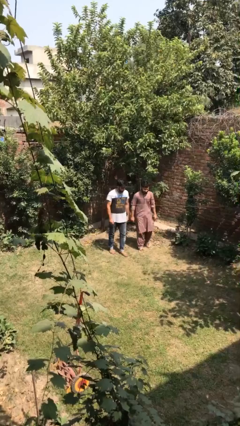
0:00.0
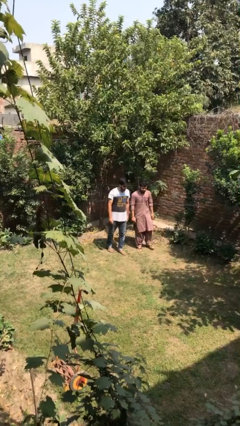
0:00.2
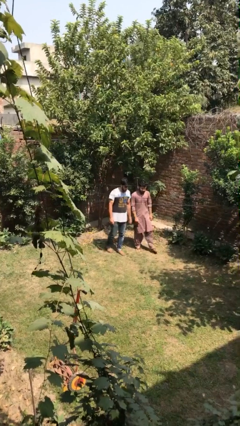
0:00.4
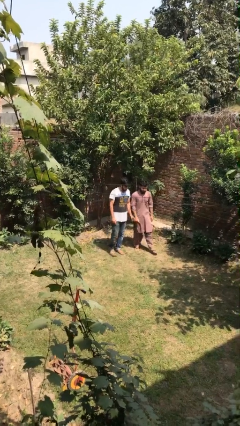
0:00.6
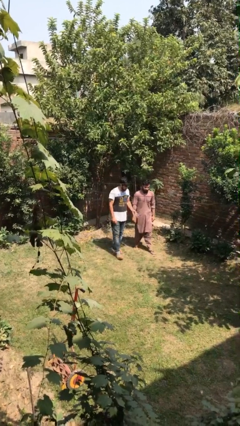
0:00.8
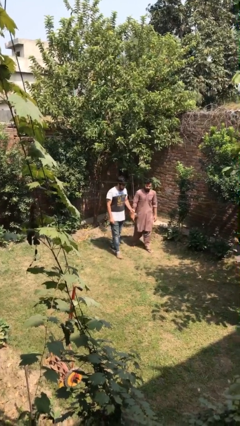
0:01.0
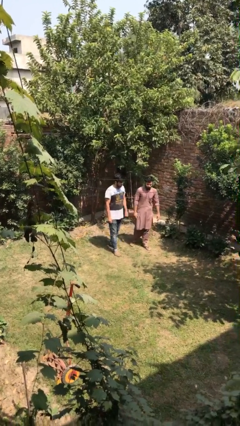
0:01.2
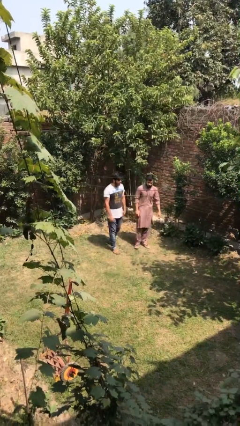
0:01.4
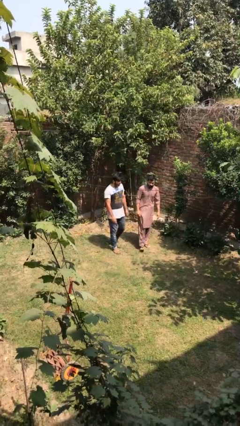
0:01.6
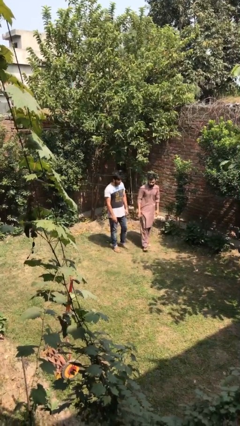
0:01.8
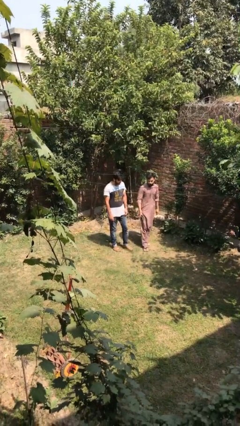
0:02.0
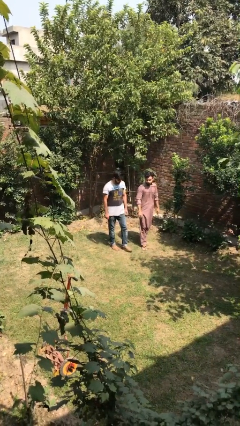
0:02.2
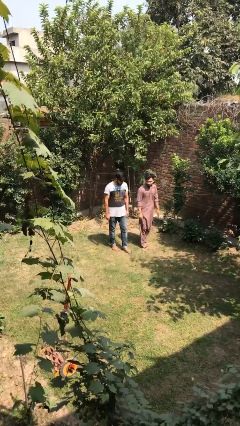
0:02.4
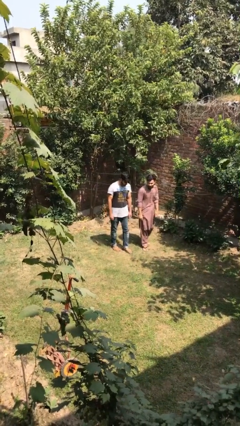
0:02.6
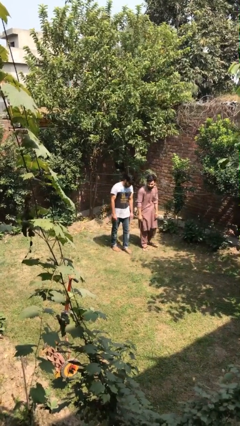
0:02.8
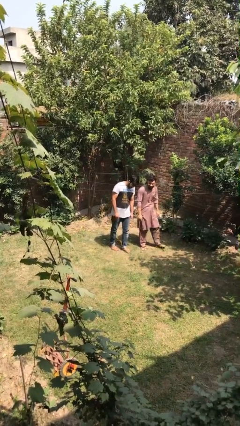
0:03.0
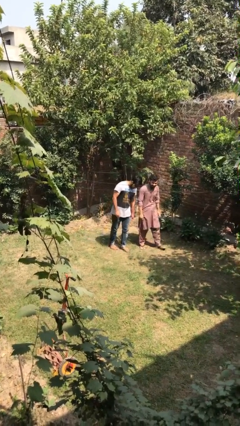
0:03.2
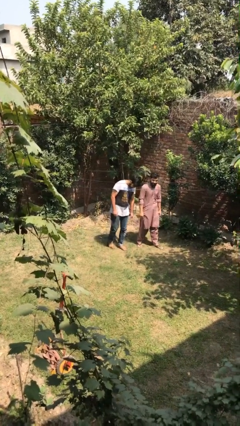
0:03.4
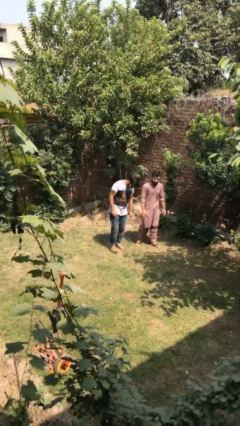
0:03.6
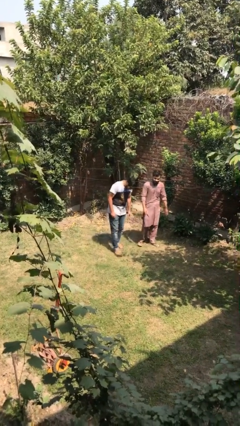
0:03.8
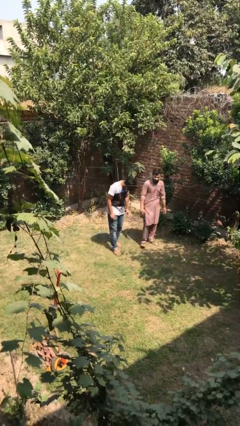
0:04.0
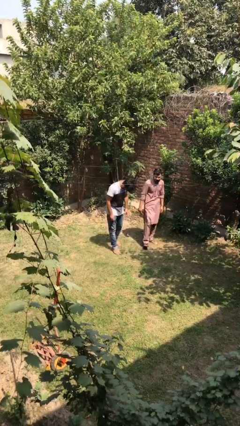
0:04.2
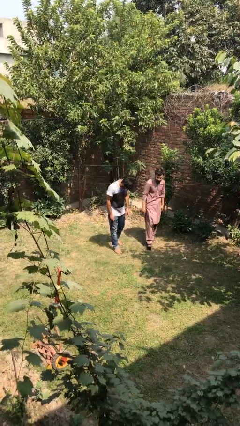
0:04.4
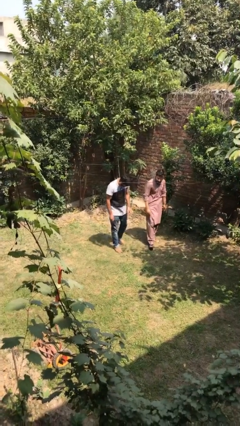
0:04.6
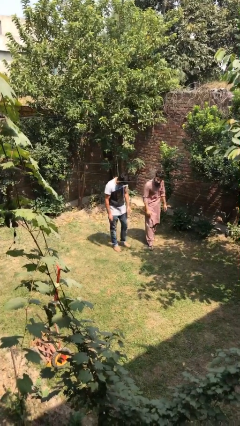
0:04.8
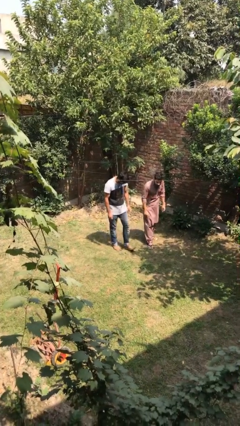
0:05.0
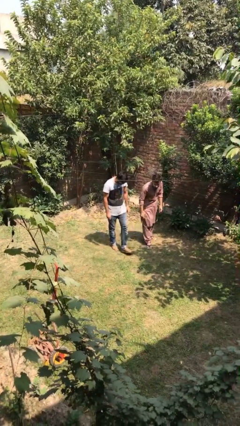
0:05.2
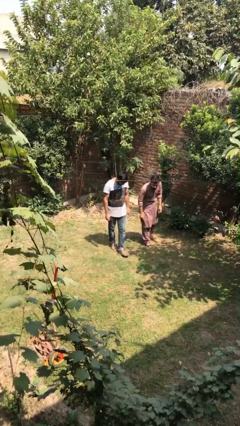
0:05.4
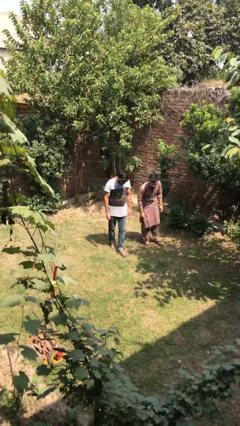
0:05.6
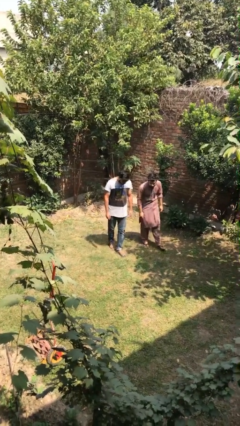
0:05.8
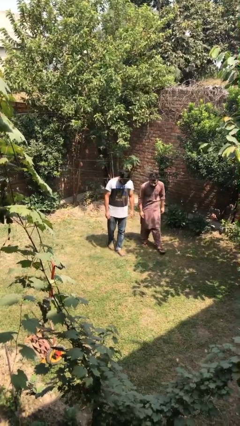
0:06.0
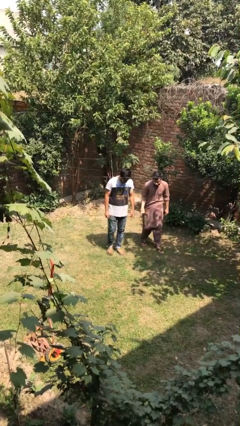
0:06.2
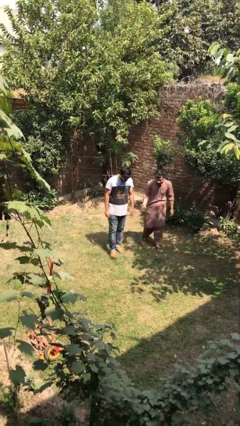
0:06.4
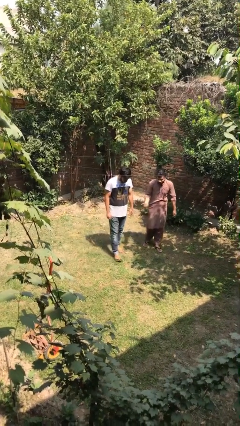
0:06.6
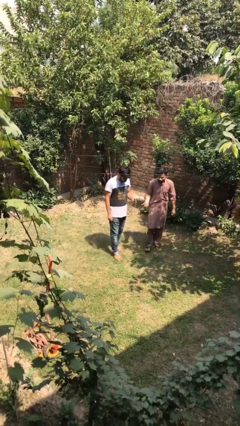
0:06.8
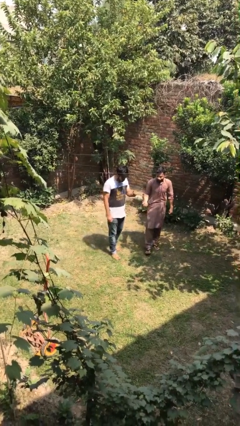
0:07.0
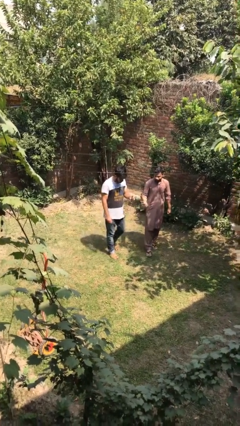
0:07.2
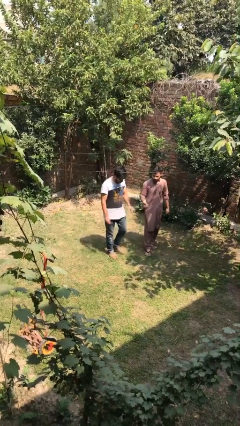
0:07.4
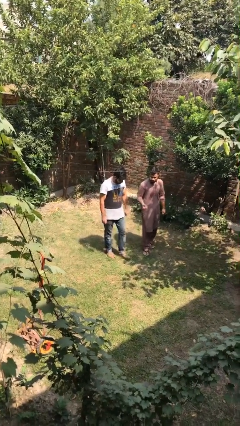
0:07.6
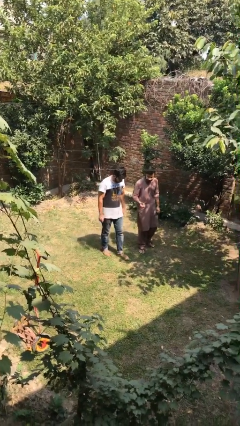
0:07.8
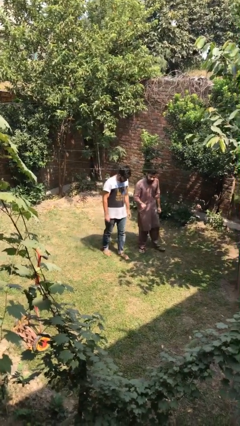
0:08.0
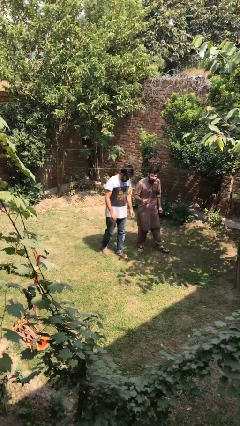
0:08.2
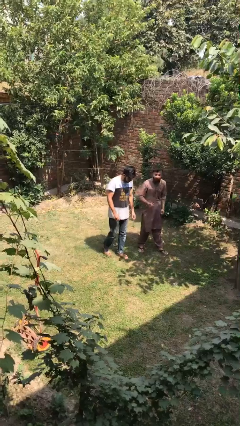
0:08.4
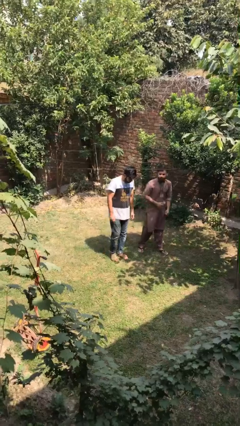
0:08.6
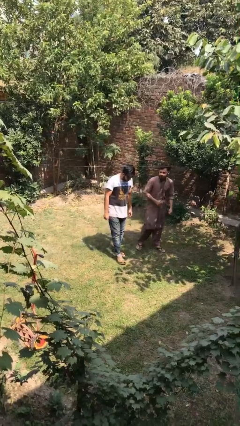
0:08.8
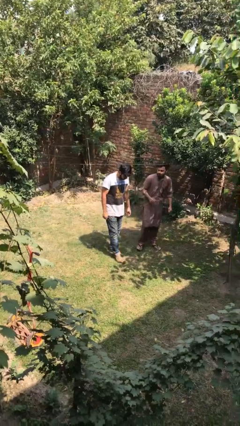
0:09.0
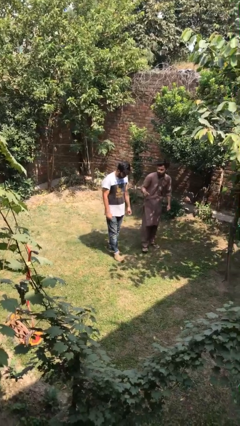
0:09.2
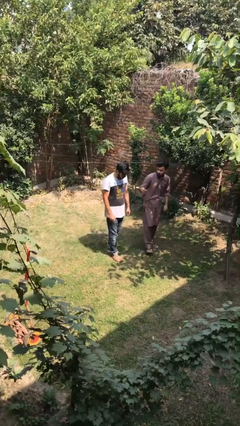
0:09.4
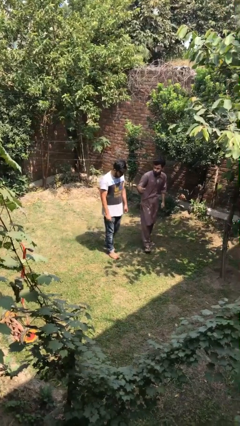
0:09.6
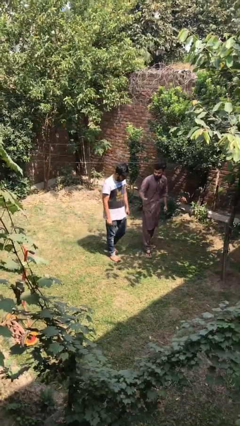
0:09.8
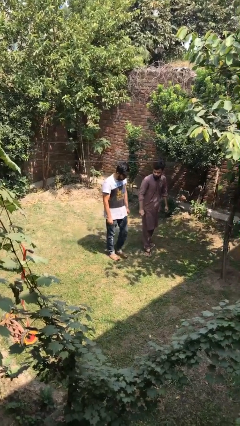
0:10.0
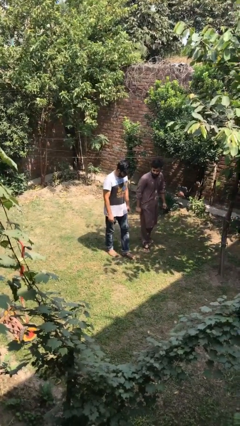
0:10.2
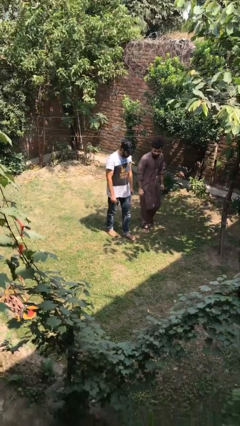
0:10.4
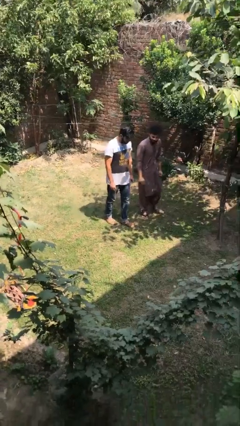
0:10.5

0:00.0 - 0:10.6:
person talks to person

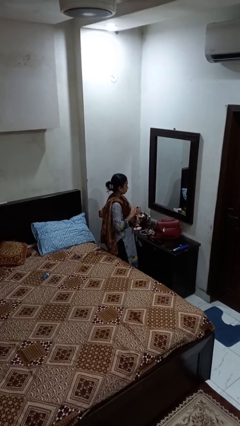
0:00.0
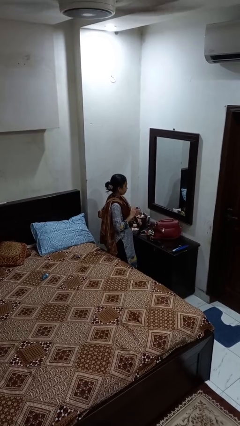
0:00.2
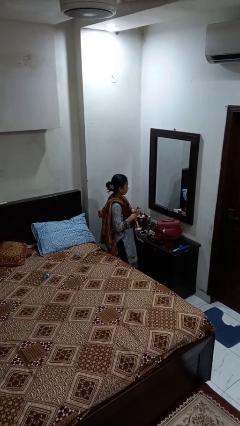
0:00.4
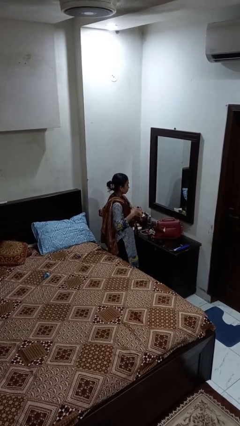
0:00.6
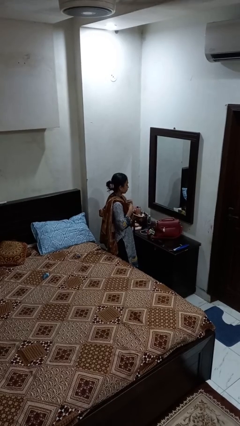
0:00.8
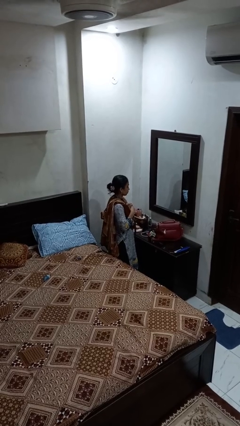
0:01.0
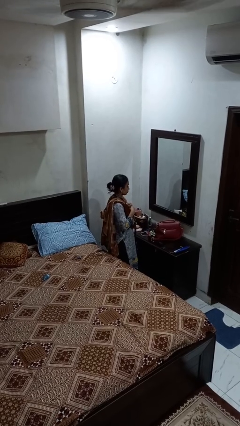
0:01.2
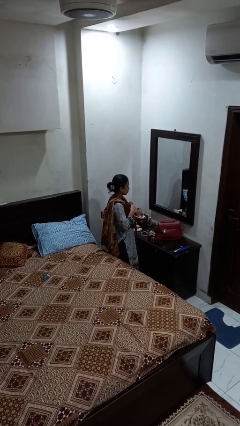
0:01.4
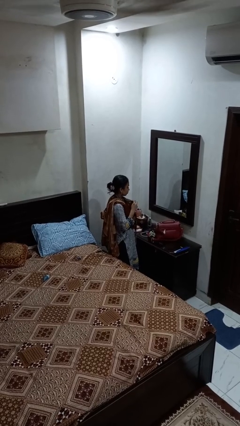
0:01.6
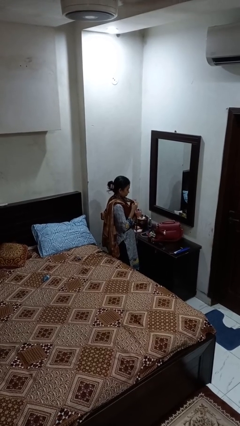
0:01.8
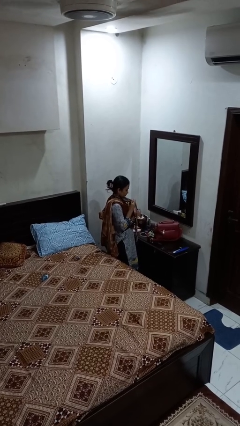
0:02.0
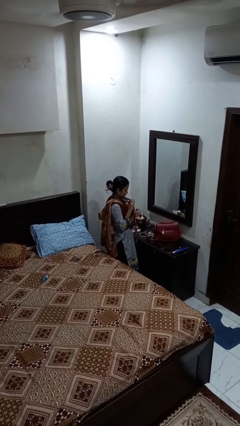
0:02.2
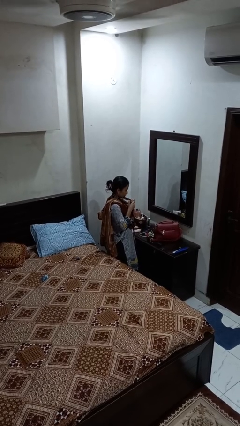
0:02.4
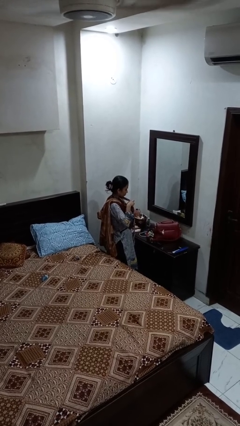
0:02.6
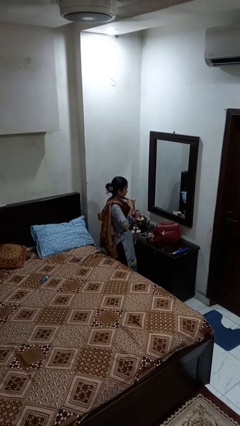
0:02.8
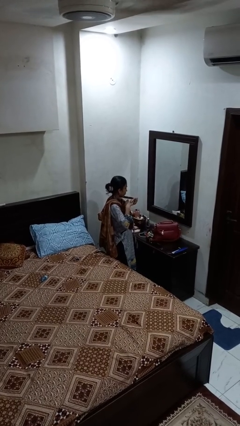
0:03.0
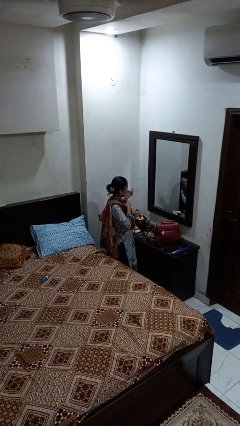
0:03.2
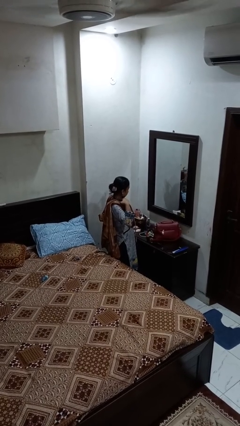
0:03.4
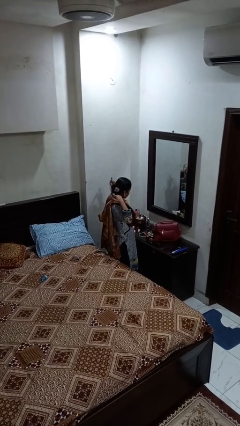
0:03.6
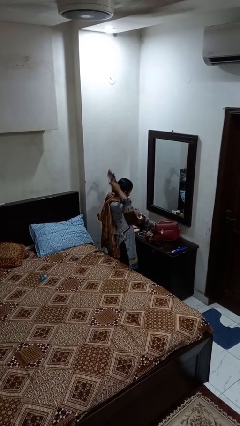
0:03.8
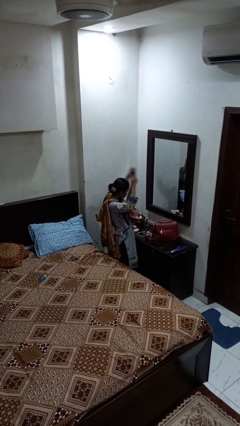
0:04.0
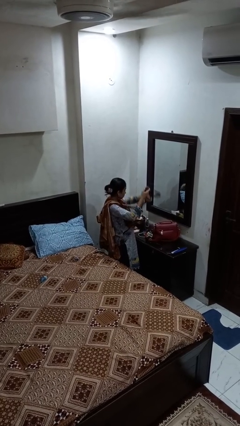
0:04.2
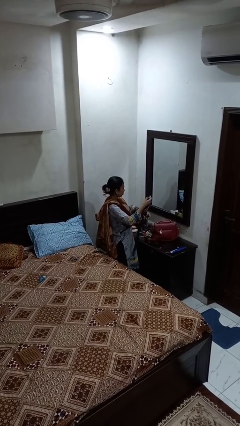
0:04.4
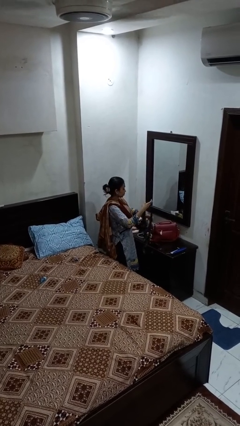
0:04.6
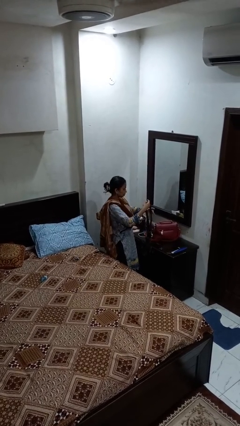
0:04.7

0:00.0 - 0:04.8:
person takes off necktie

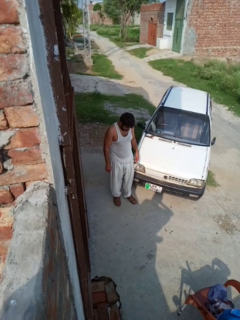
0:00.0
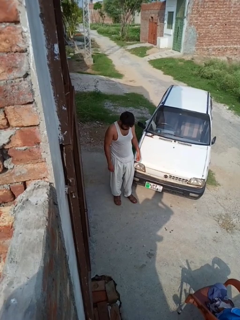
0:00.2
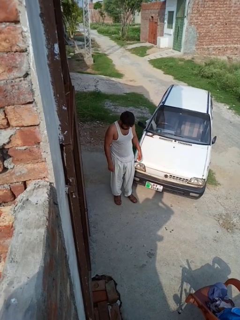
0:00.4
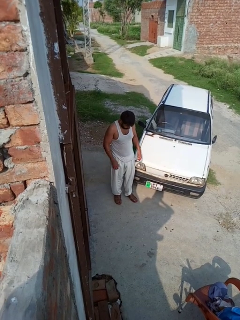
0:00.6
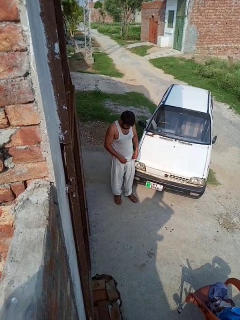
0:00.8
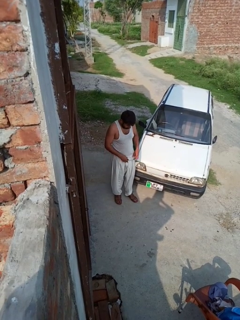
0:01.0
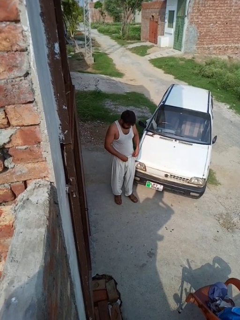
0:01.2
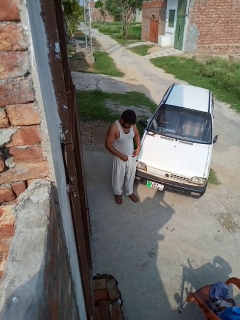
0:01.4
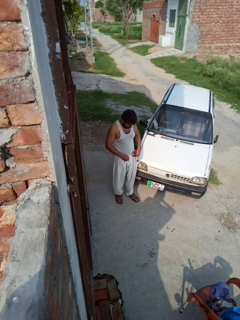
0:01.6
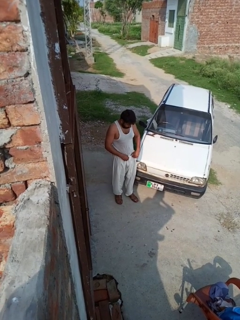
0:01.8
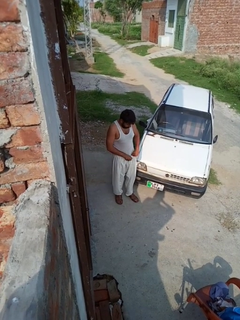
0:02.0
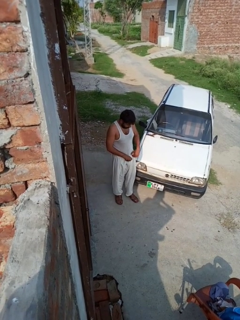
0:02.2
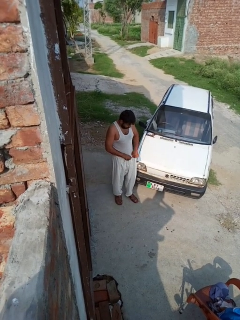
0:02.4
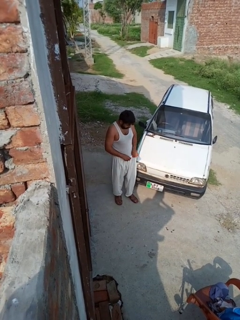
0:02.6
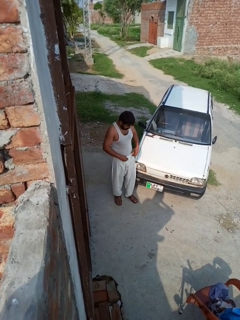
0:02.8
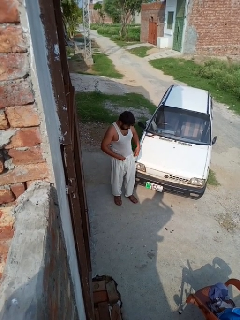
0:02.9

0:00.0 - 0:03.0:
person tucks in shirt

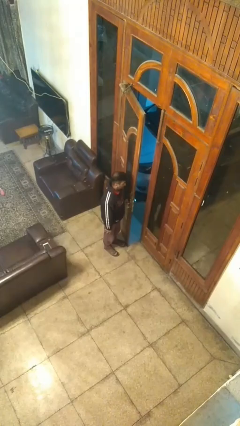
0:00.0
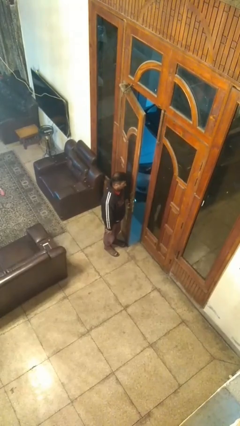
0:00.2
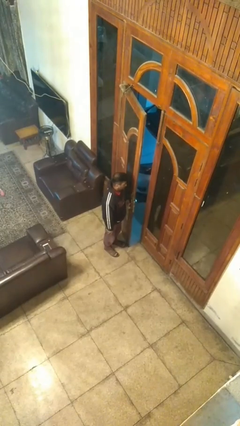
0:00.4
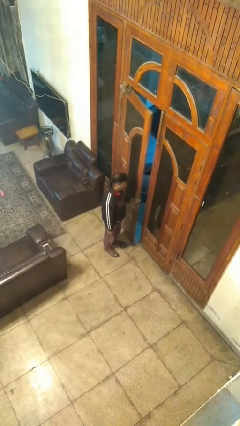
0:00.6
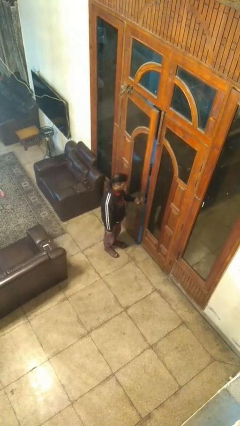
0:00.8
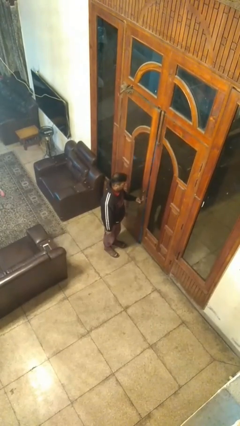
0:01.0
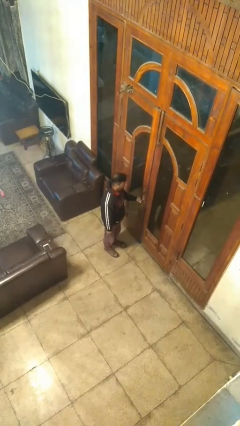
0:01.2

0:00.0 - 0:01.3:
person closes facility door
